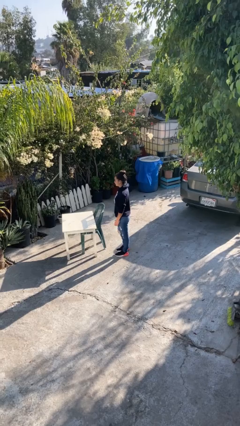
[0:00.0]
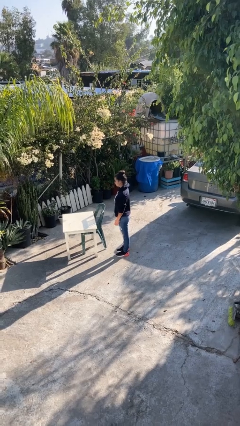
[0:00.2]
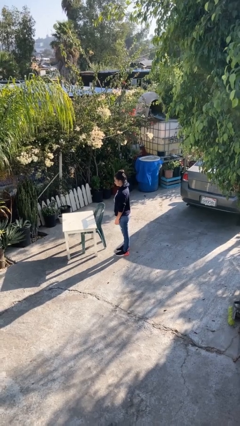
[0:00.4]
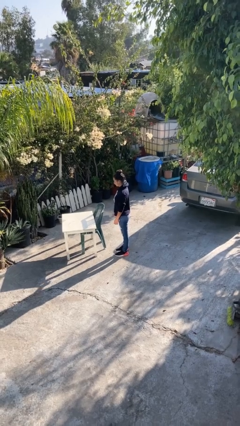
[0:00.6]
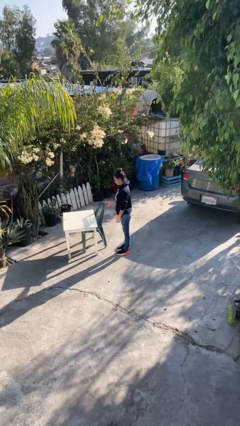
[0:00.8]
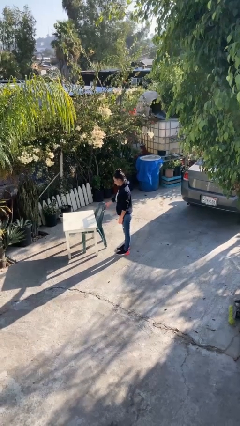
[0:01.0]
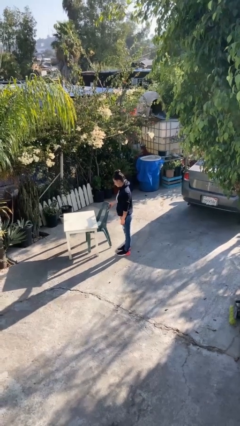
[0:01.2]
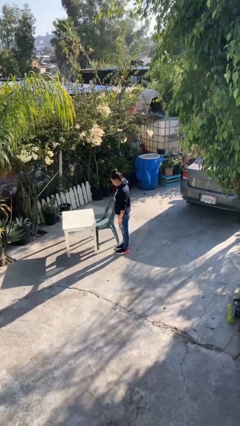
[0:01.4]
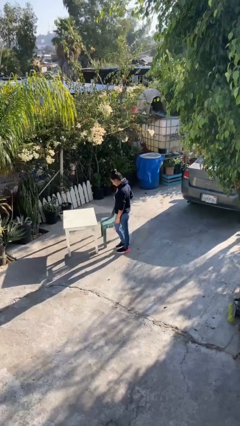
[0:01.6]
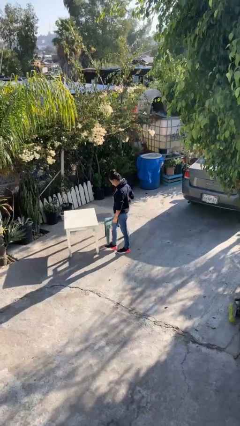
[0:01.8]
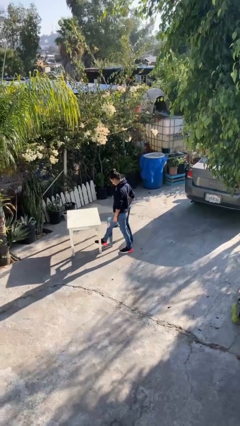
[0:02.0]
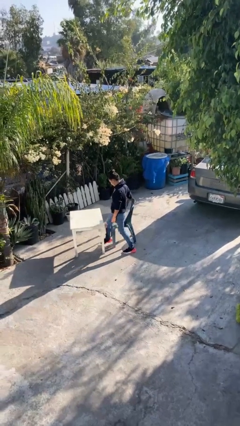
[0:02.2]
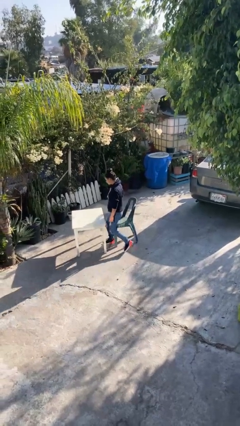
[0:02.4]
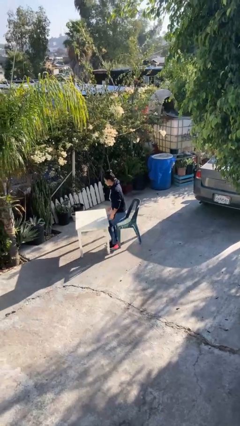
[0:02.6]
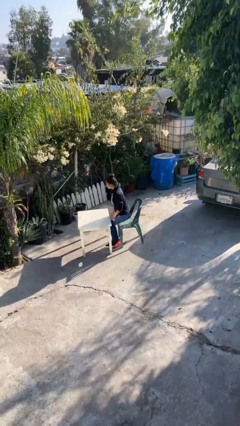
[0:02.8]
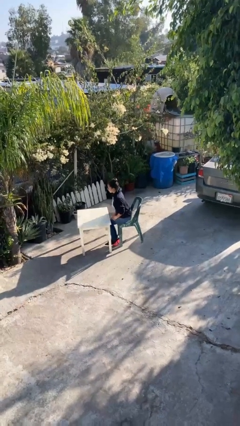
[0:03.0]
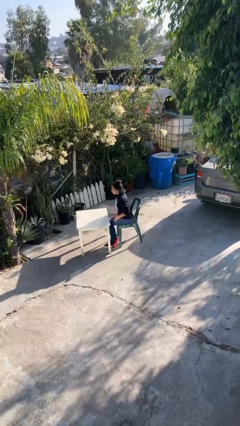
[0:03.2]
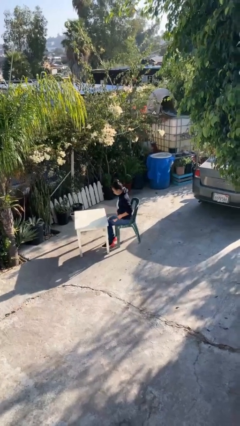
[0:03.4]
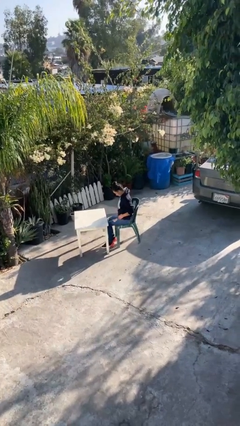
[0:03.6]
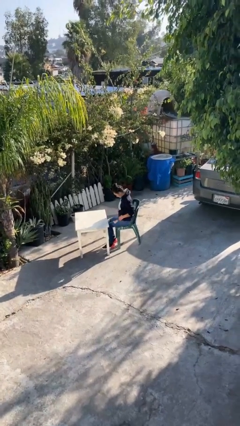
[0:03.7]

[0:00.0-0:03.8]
person sits down

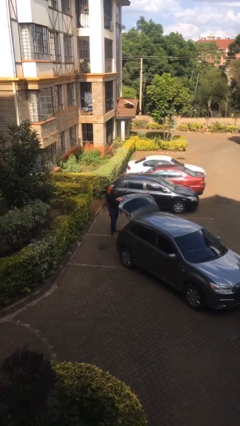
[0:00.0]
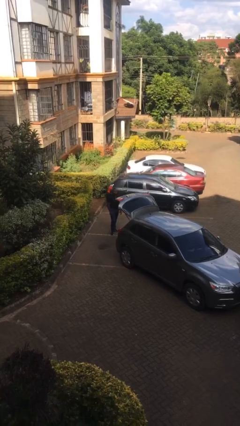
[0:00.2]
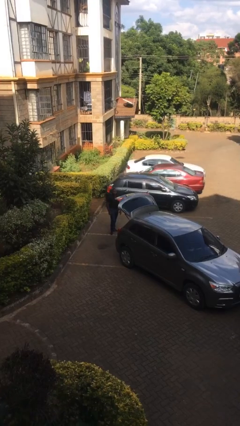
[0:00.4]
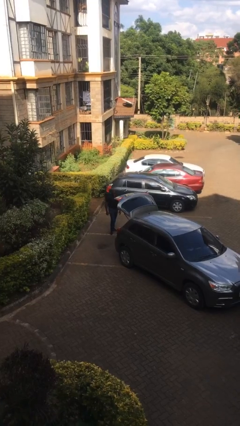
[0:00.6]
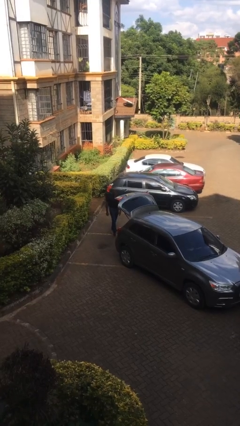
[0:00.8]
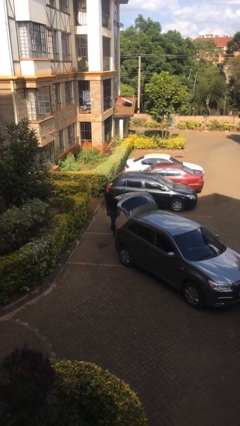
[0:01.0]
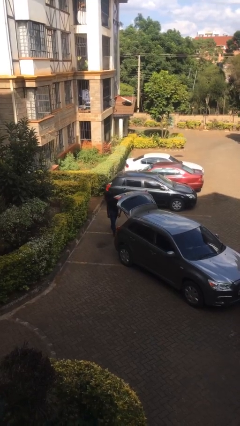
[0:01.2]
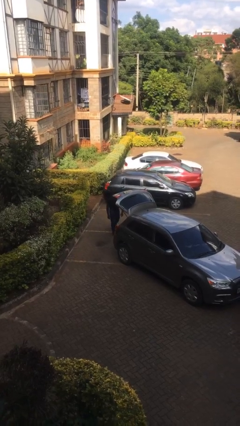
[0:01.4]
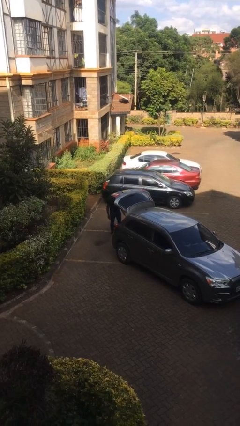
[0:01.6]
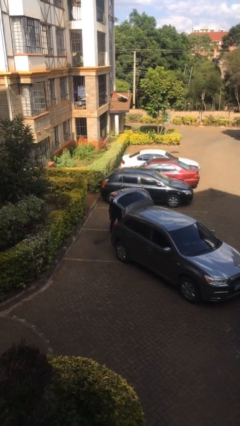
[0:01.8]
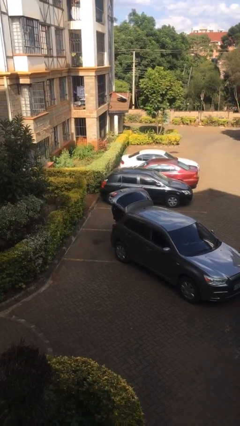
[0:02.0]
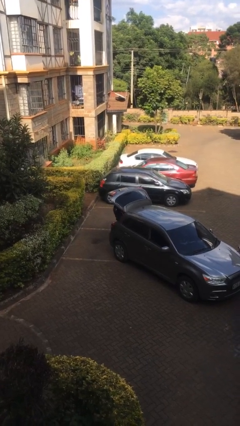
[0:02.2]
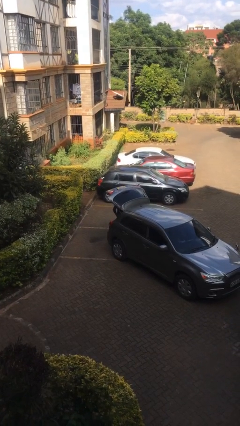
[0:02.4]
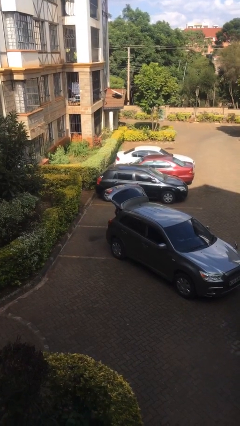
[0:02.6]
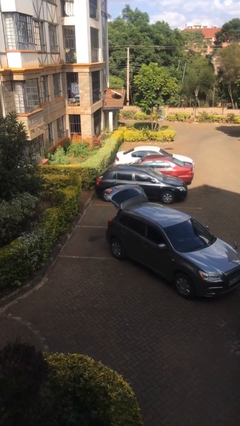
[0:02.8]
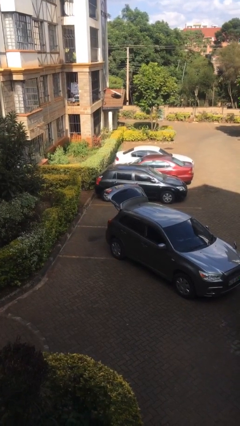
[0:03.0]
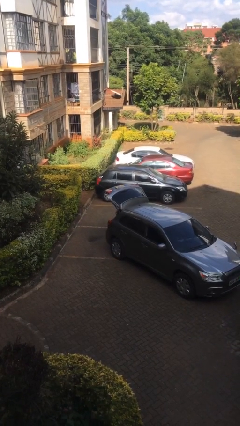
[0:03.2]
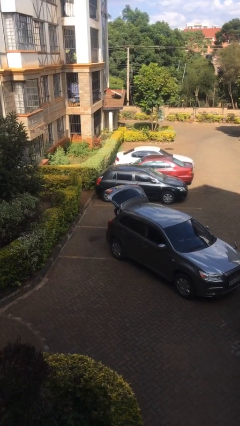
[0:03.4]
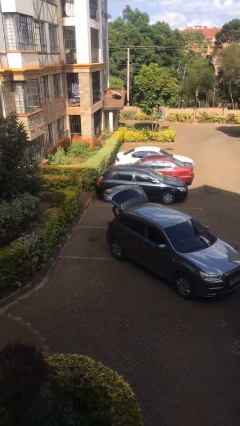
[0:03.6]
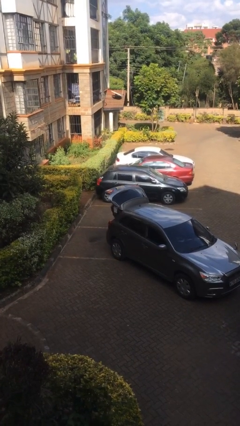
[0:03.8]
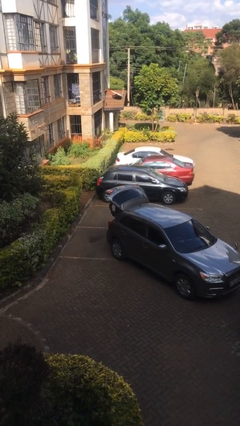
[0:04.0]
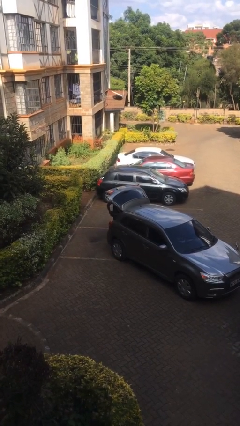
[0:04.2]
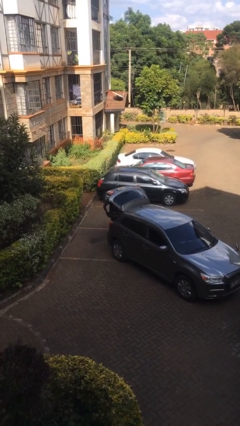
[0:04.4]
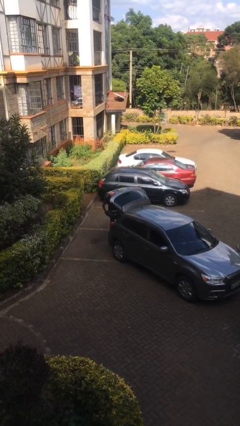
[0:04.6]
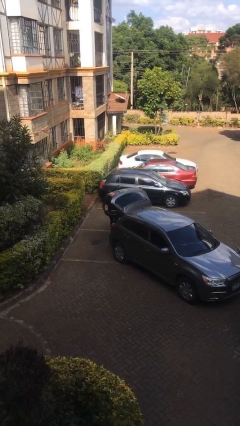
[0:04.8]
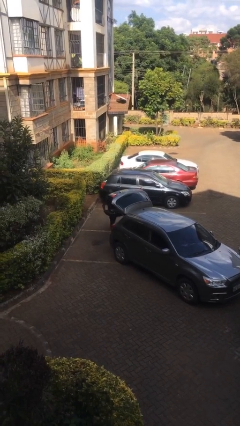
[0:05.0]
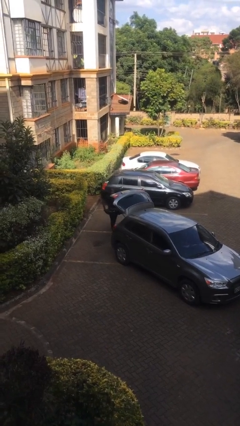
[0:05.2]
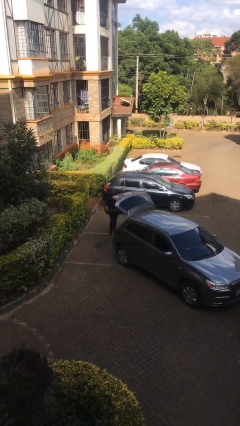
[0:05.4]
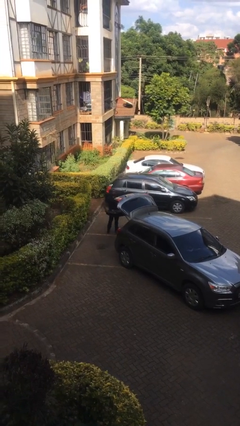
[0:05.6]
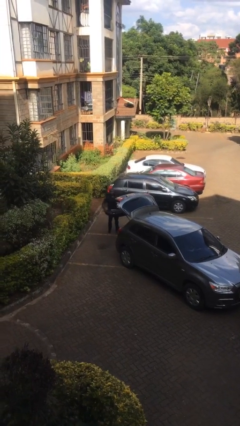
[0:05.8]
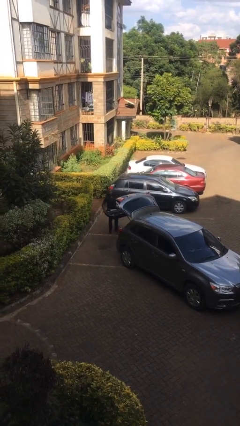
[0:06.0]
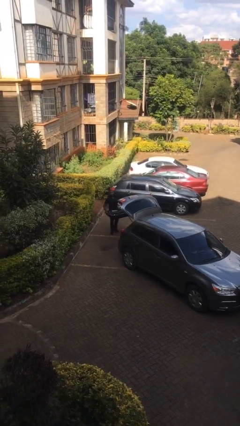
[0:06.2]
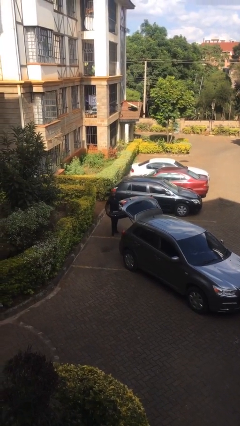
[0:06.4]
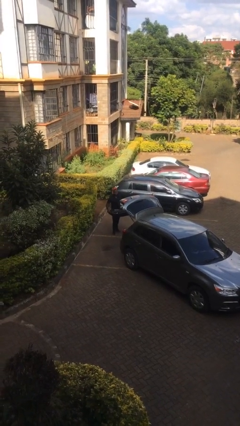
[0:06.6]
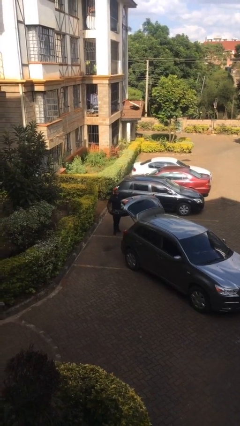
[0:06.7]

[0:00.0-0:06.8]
person unloads car

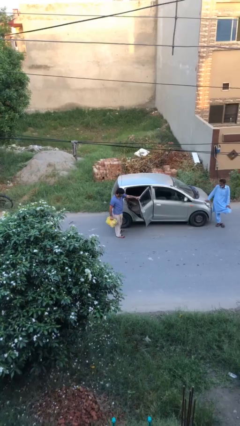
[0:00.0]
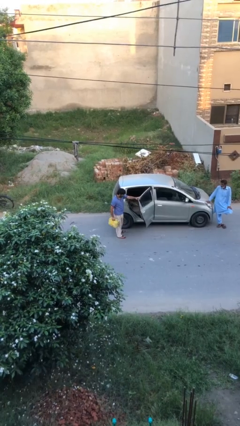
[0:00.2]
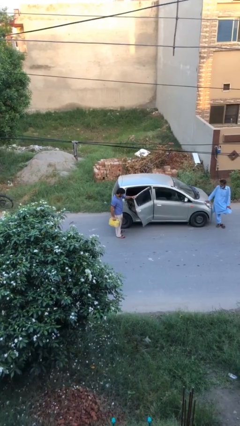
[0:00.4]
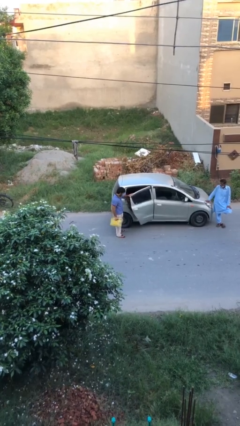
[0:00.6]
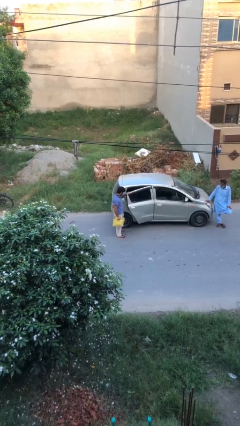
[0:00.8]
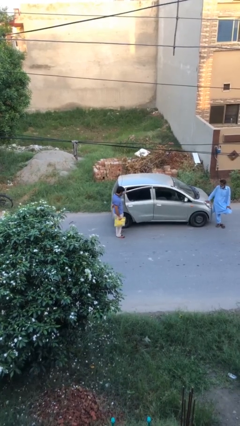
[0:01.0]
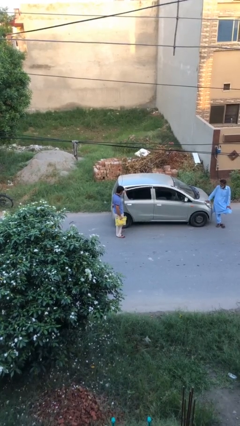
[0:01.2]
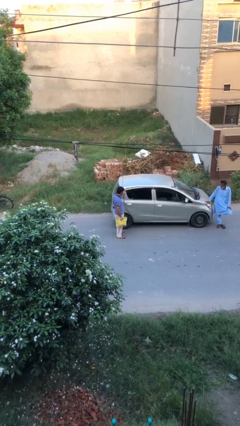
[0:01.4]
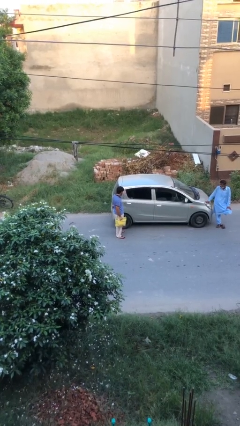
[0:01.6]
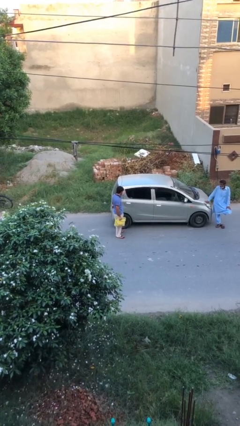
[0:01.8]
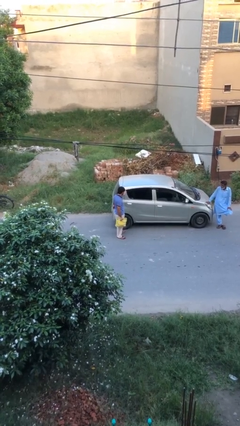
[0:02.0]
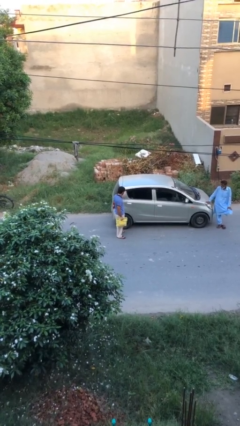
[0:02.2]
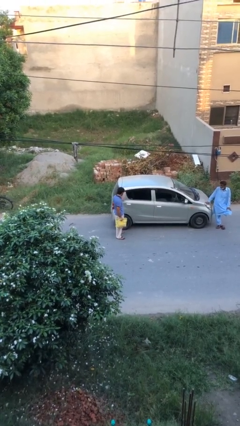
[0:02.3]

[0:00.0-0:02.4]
person closes car door

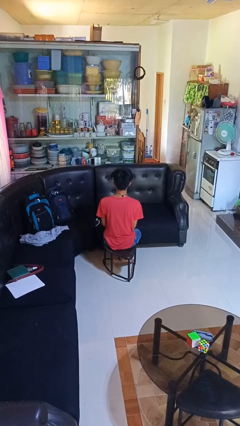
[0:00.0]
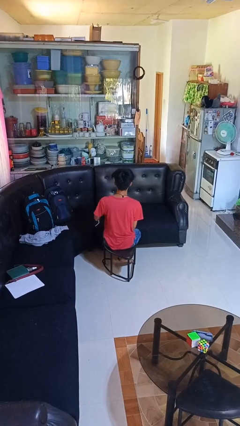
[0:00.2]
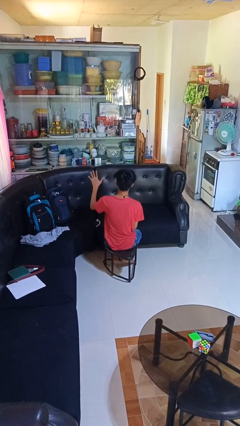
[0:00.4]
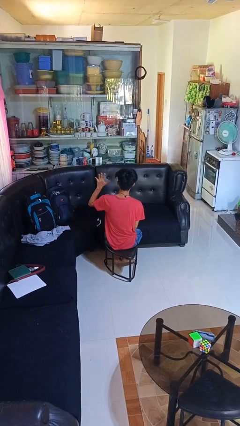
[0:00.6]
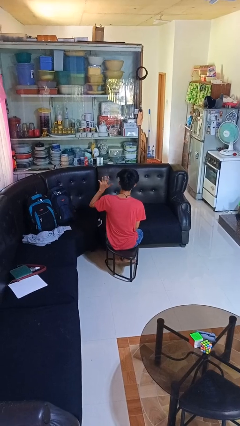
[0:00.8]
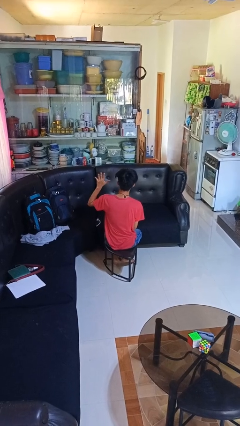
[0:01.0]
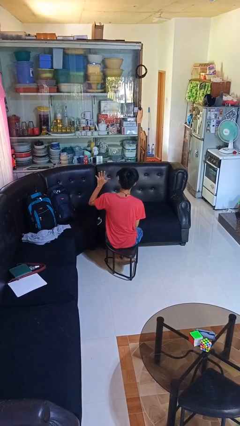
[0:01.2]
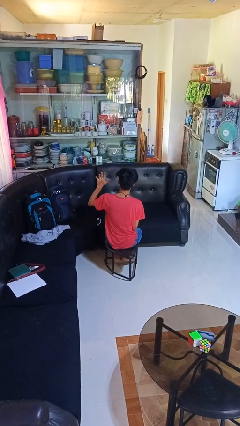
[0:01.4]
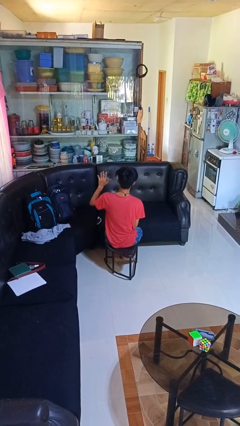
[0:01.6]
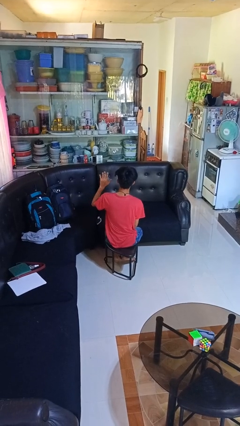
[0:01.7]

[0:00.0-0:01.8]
person gestures number five

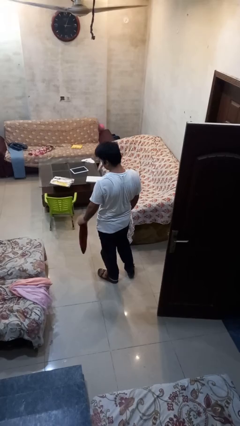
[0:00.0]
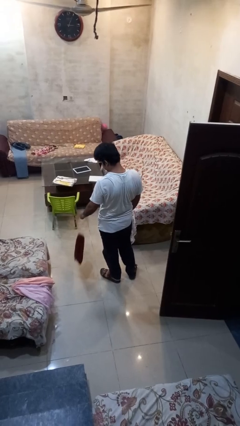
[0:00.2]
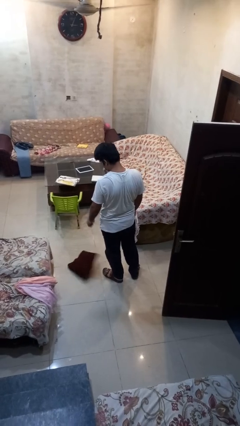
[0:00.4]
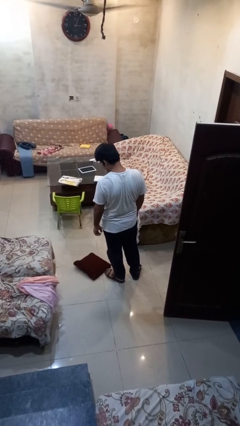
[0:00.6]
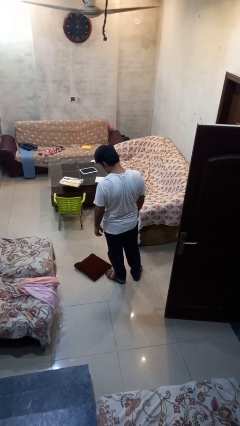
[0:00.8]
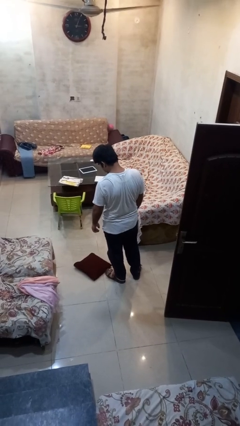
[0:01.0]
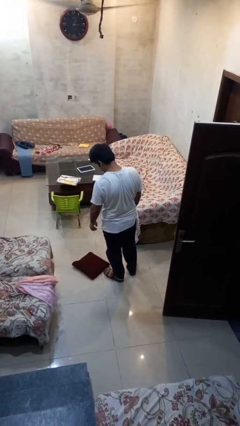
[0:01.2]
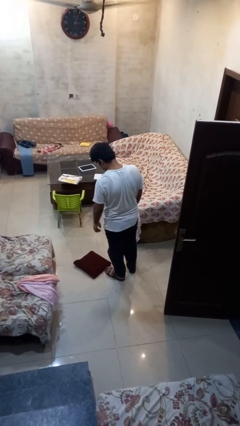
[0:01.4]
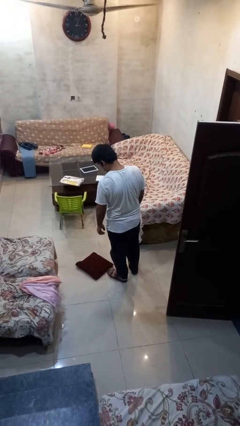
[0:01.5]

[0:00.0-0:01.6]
person drops object

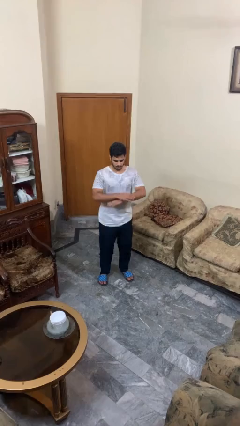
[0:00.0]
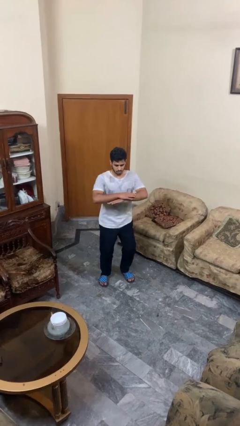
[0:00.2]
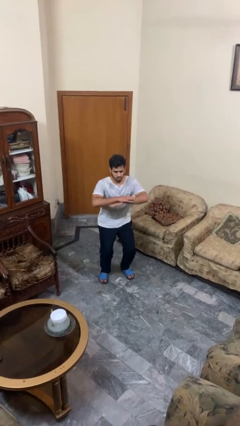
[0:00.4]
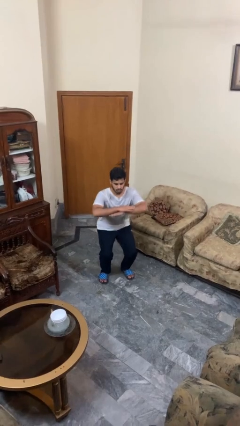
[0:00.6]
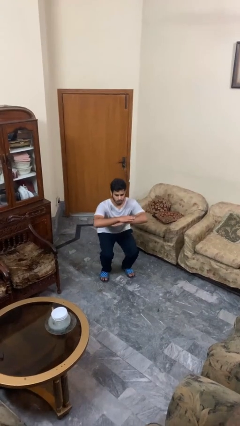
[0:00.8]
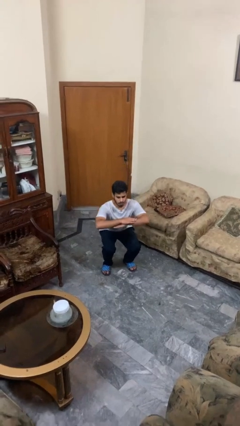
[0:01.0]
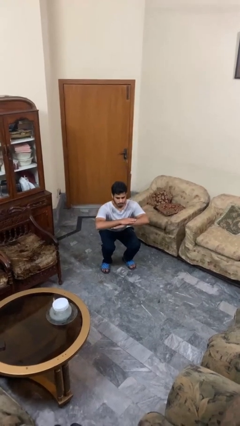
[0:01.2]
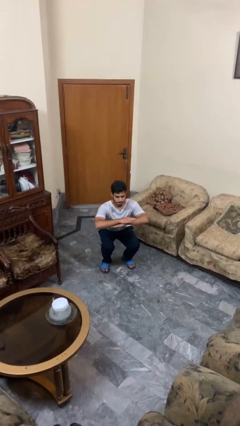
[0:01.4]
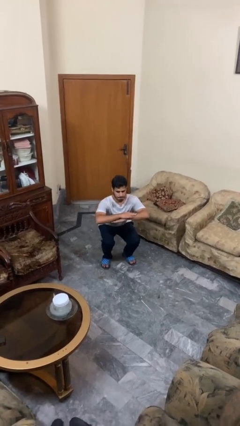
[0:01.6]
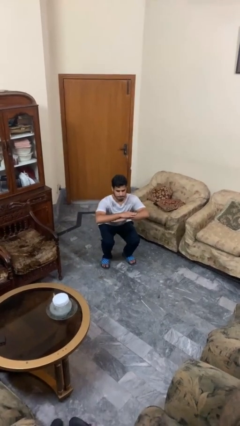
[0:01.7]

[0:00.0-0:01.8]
person squats
